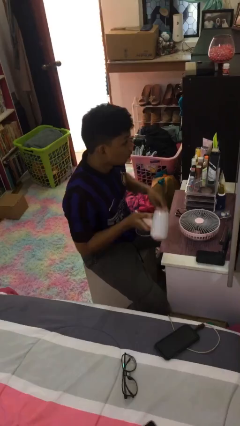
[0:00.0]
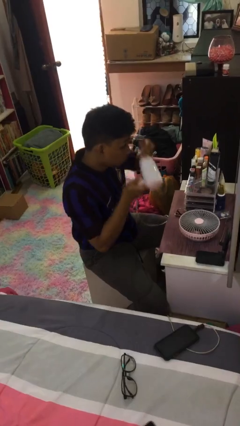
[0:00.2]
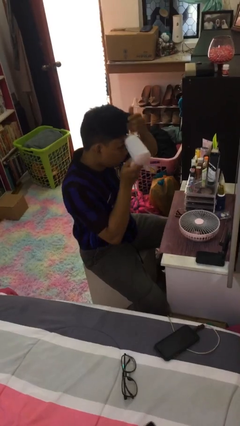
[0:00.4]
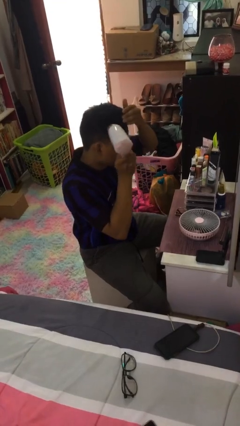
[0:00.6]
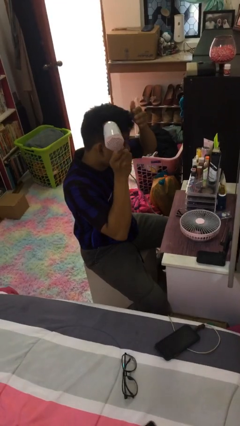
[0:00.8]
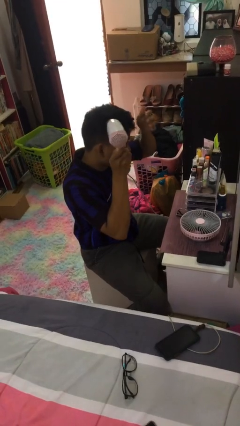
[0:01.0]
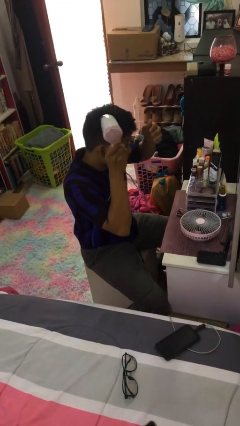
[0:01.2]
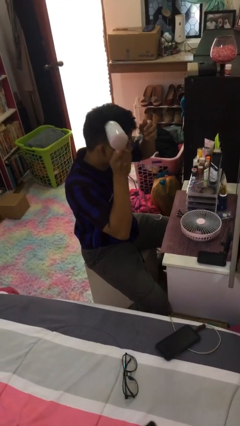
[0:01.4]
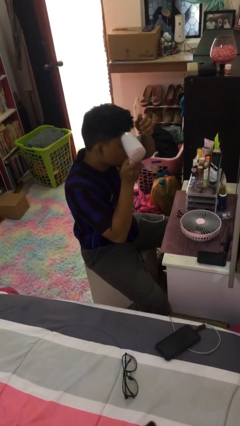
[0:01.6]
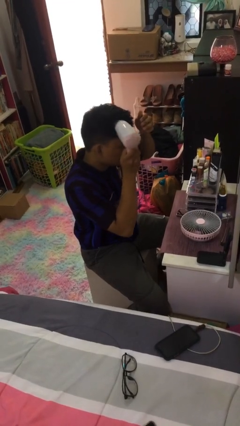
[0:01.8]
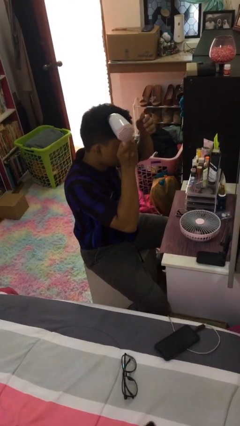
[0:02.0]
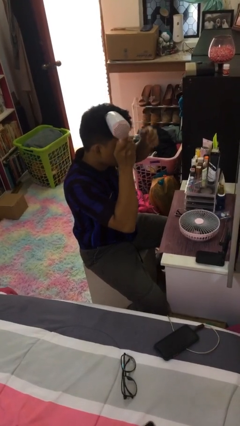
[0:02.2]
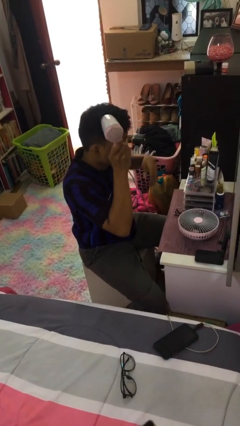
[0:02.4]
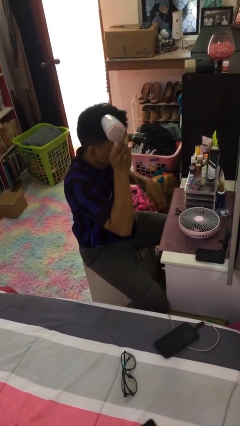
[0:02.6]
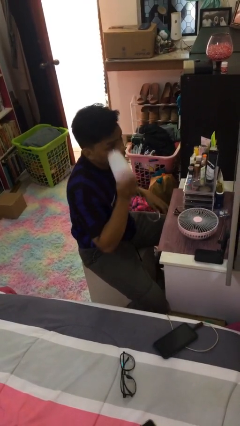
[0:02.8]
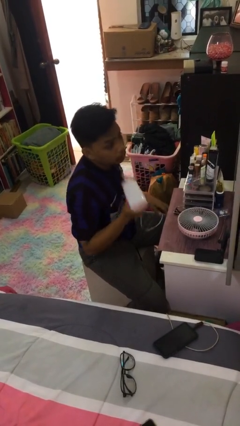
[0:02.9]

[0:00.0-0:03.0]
person dries hair with hairdryer

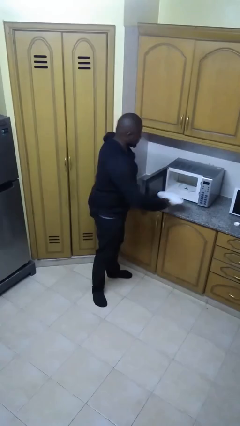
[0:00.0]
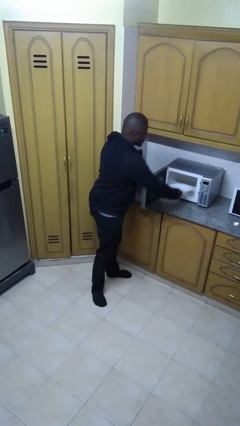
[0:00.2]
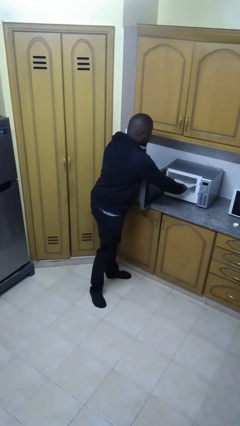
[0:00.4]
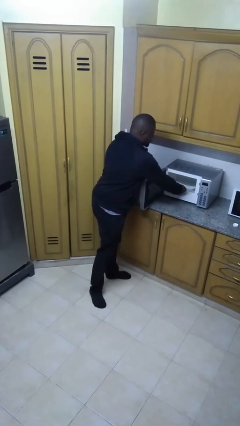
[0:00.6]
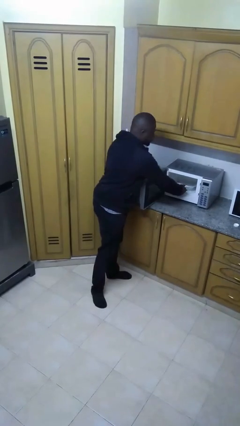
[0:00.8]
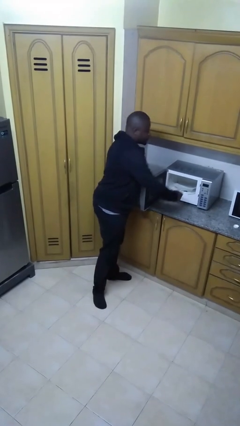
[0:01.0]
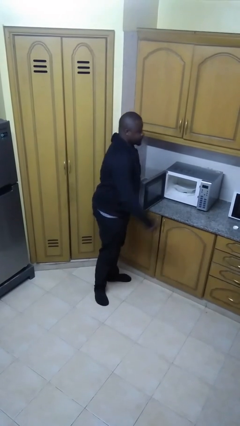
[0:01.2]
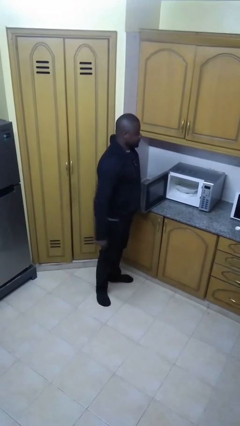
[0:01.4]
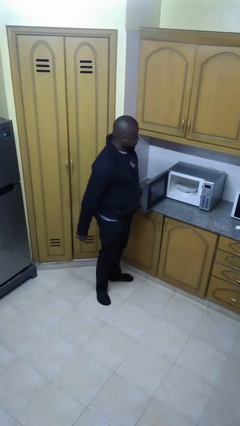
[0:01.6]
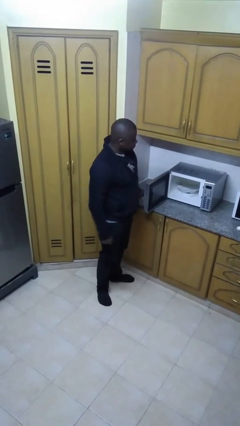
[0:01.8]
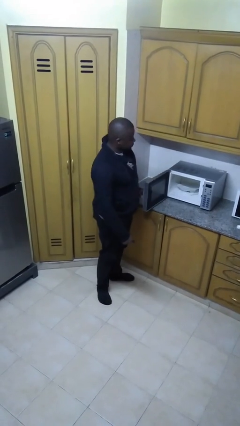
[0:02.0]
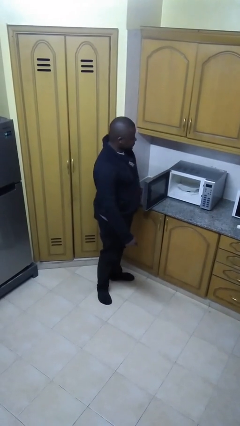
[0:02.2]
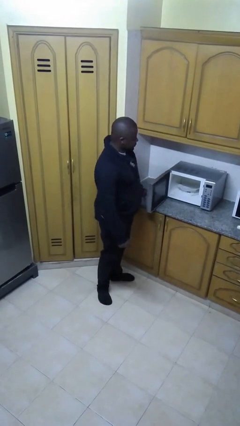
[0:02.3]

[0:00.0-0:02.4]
person puts object into microwave

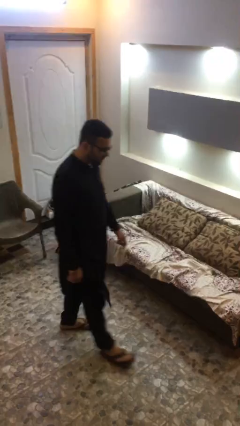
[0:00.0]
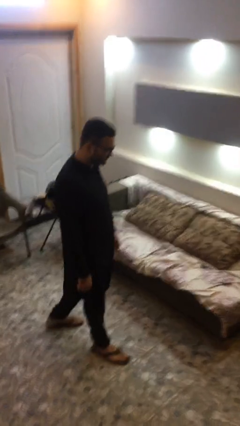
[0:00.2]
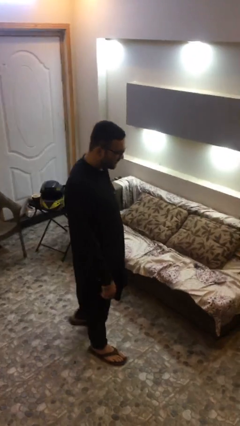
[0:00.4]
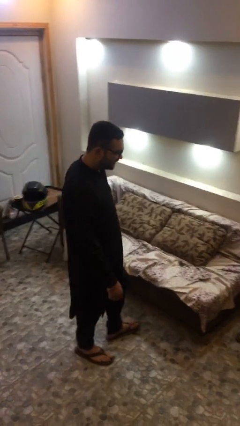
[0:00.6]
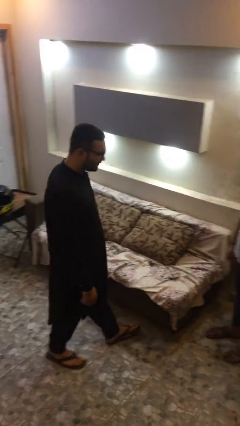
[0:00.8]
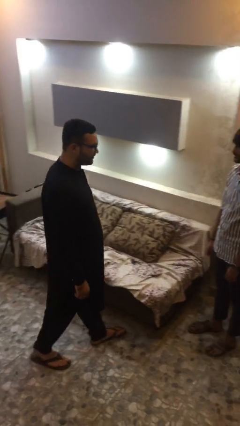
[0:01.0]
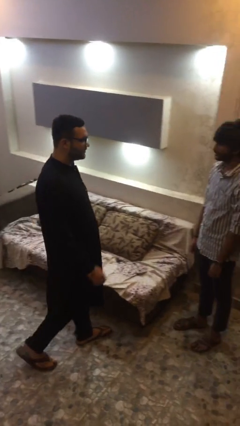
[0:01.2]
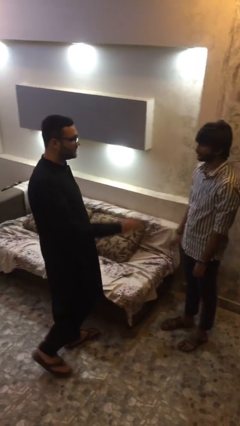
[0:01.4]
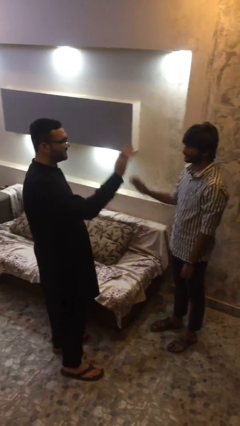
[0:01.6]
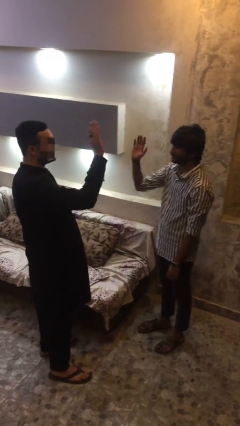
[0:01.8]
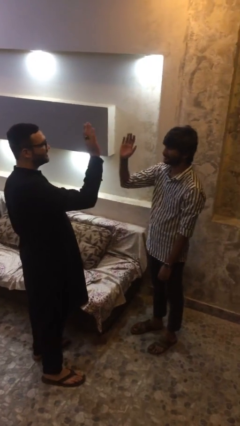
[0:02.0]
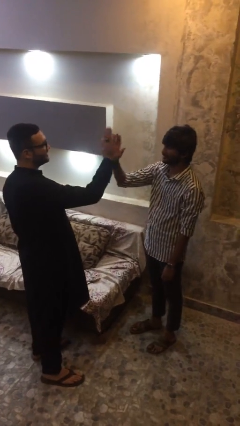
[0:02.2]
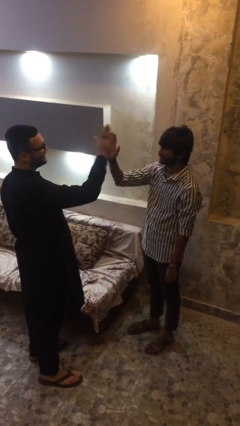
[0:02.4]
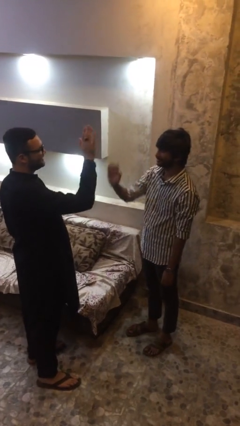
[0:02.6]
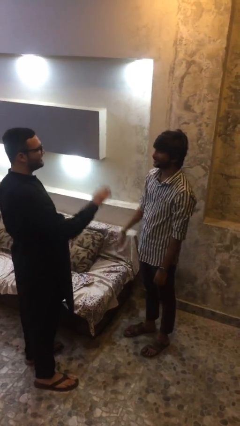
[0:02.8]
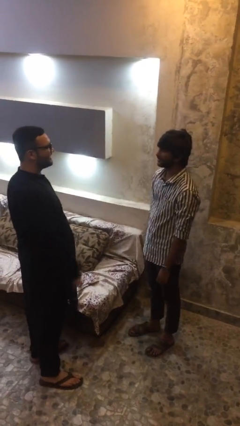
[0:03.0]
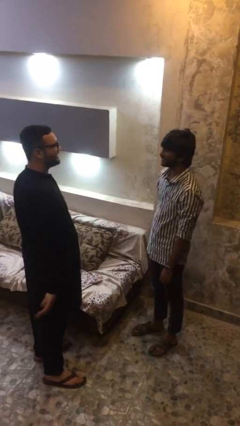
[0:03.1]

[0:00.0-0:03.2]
person highfives hand

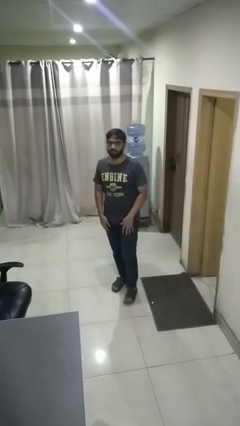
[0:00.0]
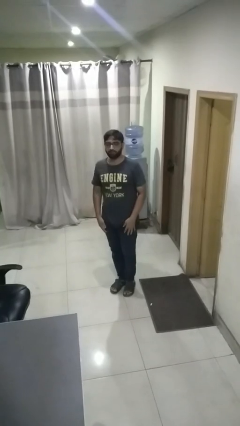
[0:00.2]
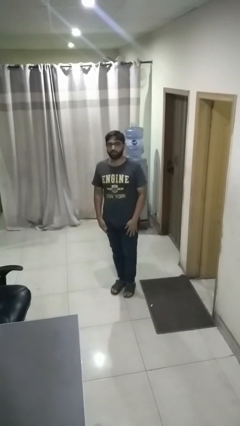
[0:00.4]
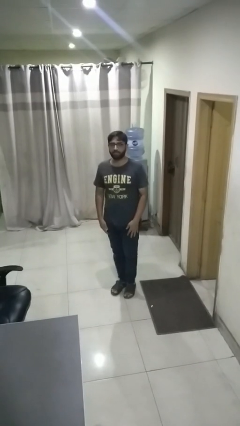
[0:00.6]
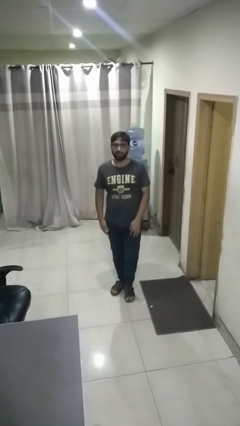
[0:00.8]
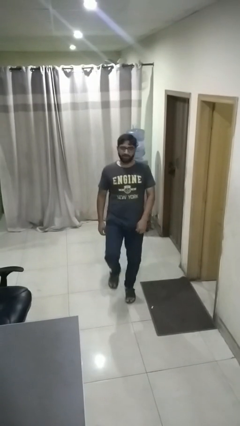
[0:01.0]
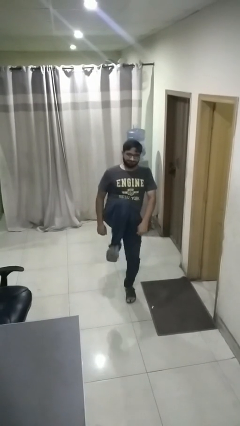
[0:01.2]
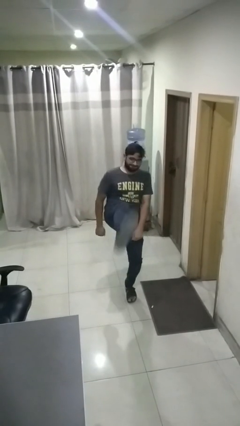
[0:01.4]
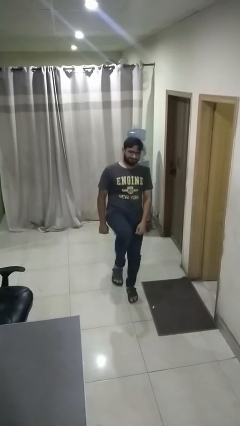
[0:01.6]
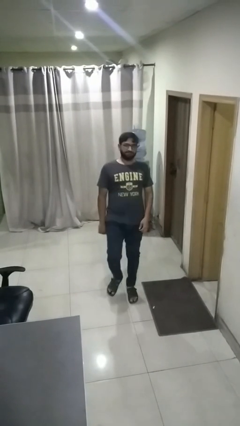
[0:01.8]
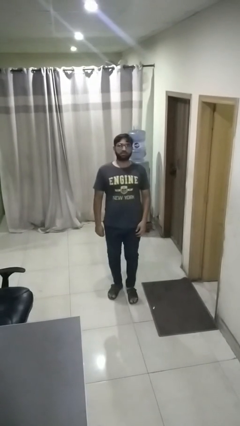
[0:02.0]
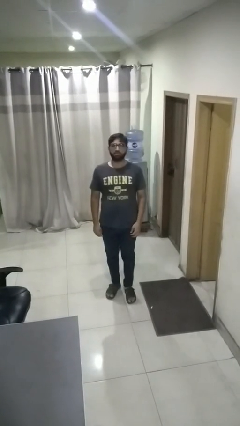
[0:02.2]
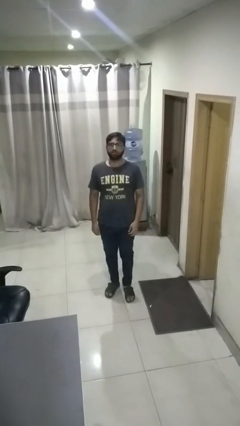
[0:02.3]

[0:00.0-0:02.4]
person karate kicks

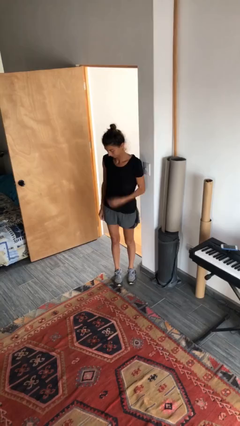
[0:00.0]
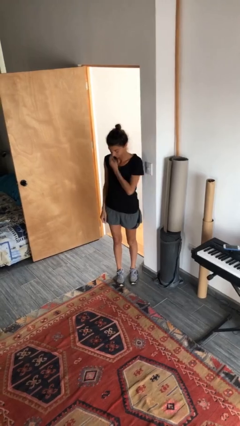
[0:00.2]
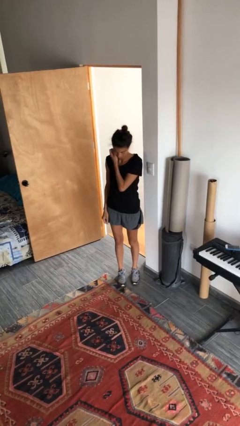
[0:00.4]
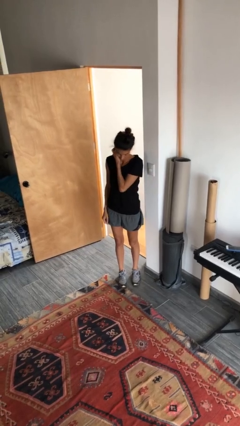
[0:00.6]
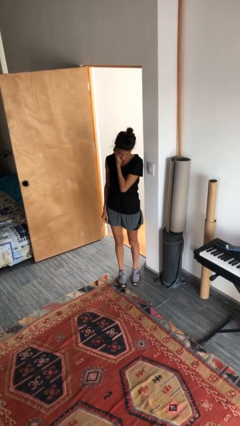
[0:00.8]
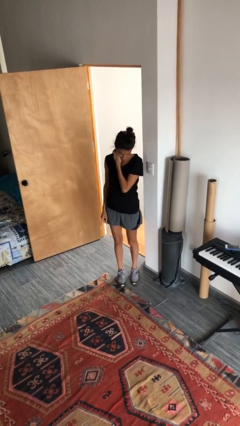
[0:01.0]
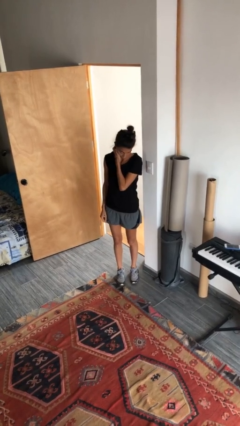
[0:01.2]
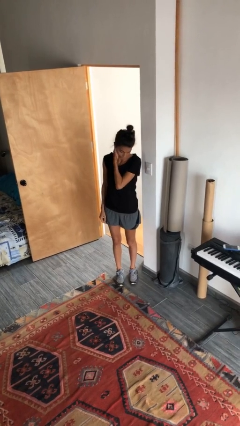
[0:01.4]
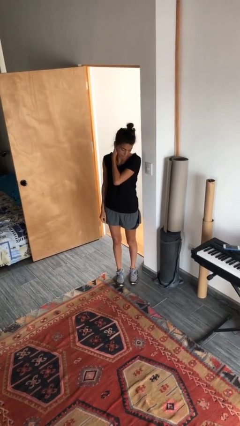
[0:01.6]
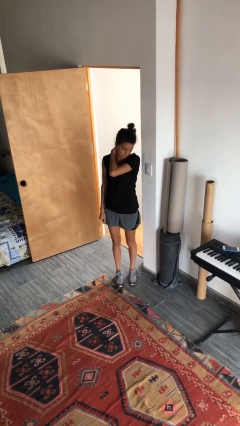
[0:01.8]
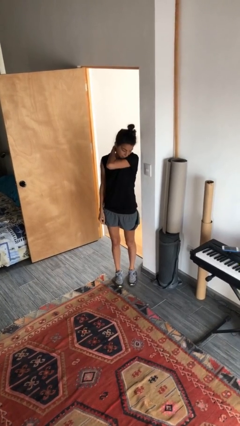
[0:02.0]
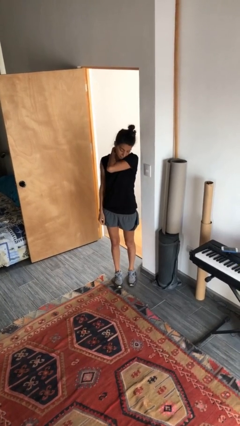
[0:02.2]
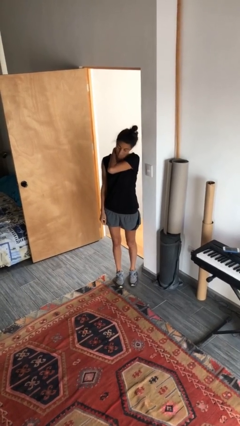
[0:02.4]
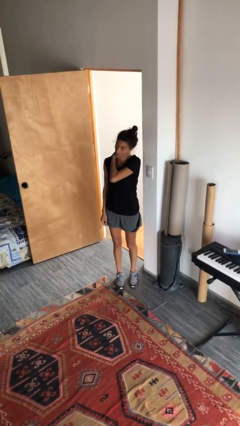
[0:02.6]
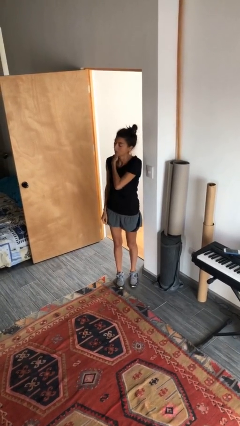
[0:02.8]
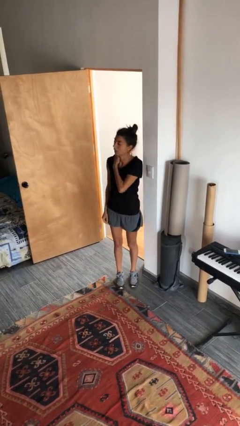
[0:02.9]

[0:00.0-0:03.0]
person scratches face

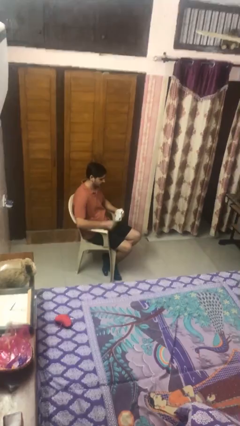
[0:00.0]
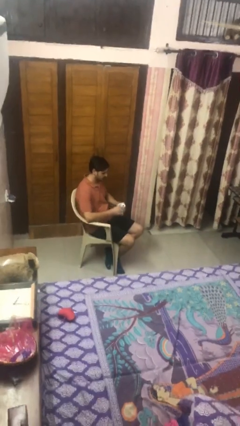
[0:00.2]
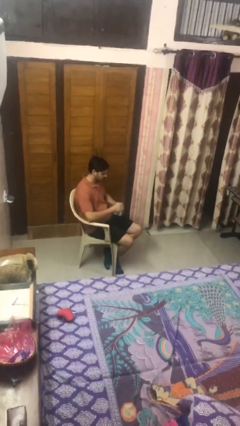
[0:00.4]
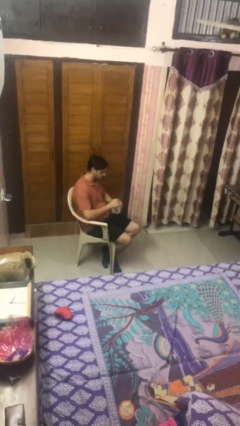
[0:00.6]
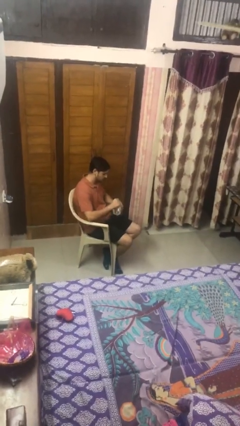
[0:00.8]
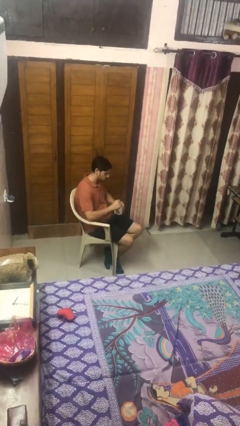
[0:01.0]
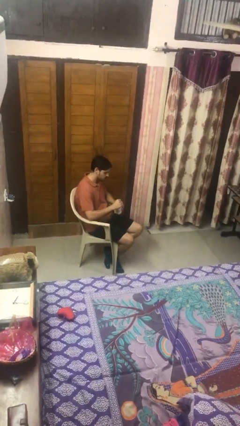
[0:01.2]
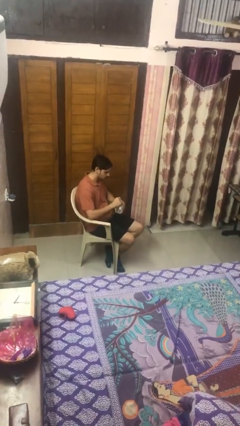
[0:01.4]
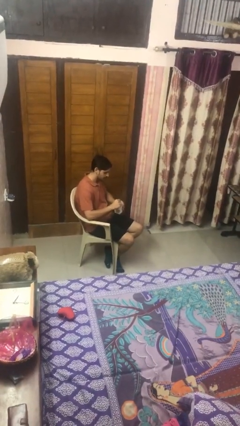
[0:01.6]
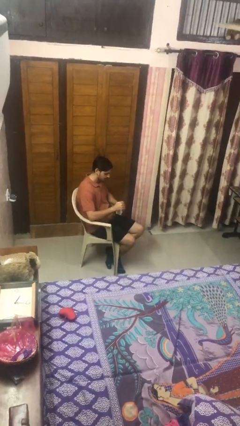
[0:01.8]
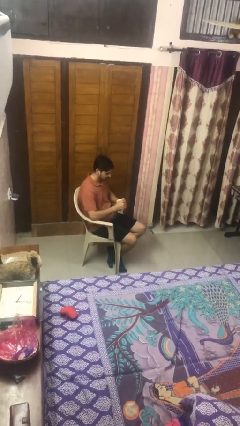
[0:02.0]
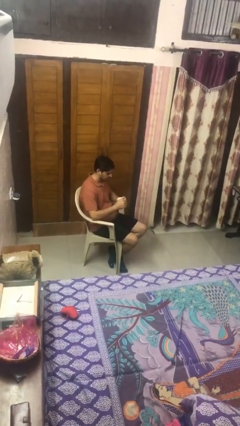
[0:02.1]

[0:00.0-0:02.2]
person stirs mug

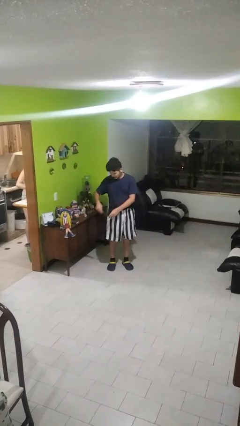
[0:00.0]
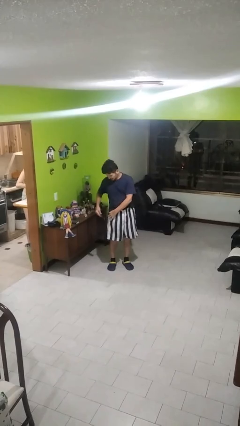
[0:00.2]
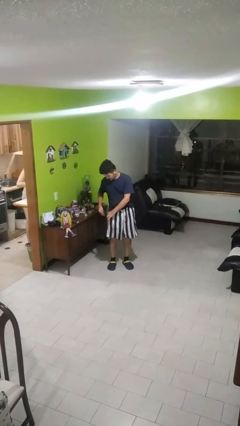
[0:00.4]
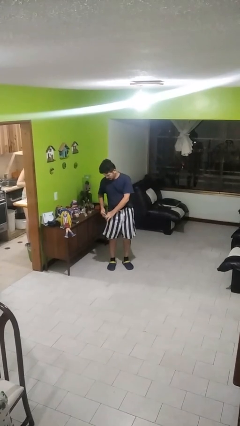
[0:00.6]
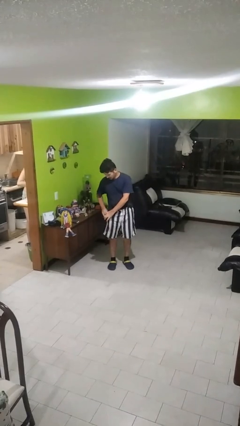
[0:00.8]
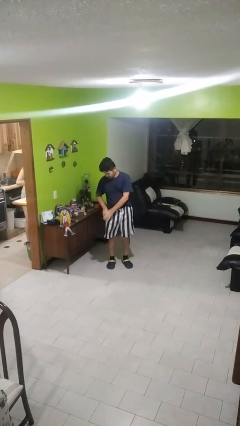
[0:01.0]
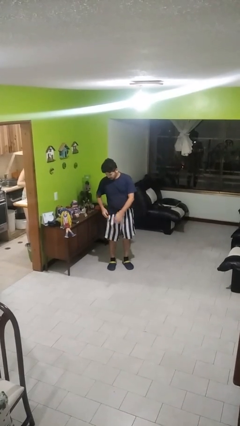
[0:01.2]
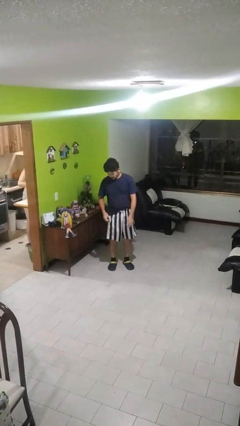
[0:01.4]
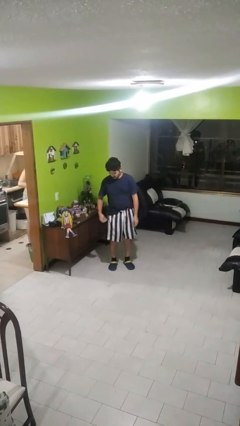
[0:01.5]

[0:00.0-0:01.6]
person puts phone into pocket
